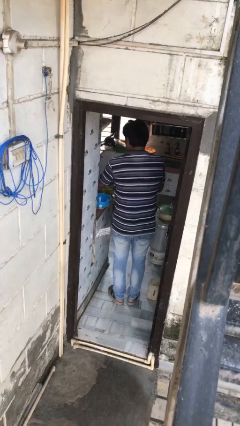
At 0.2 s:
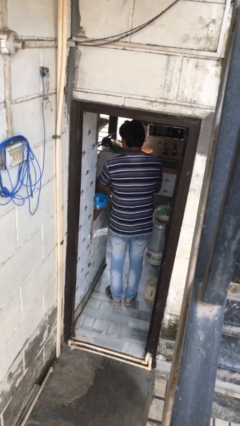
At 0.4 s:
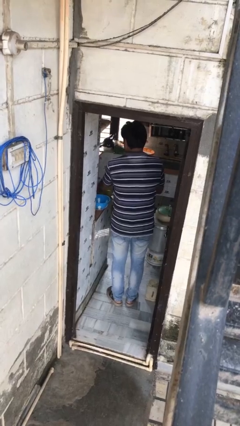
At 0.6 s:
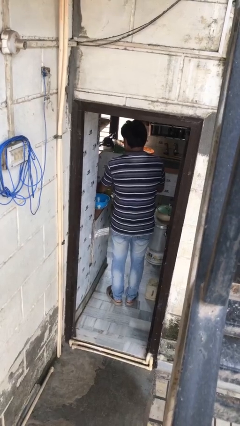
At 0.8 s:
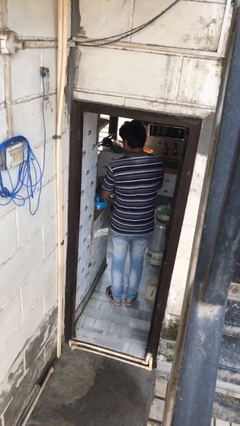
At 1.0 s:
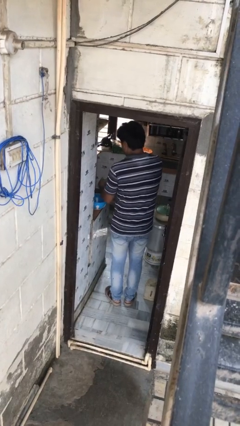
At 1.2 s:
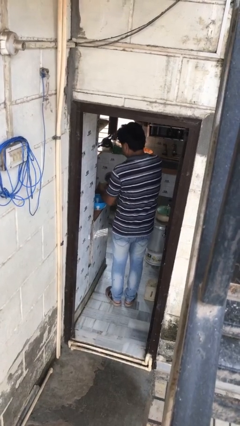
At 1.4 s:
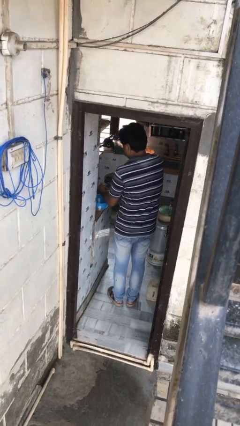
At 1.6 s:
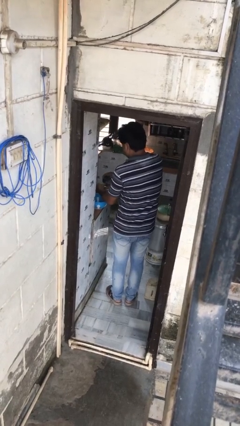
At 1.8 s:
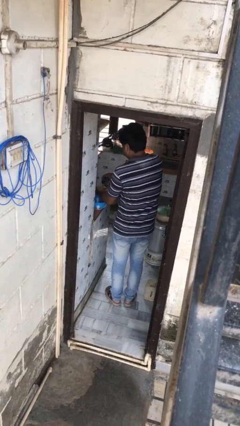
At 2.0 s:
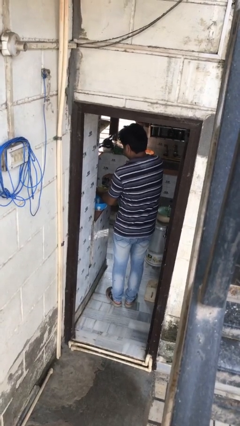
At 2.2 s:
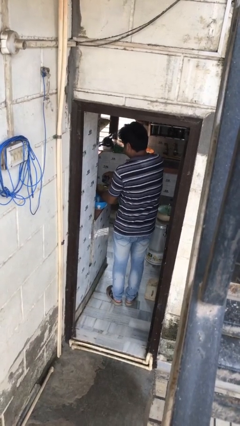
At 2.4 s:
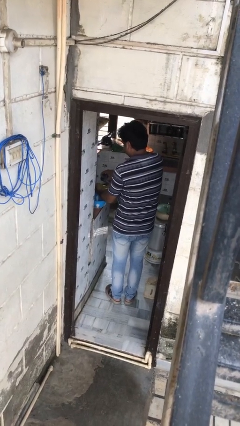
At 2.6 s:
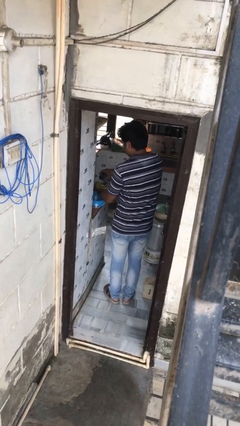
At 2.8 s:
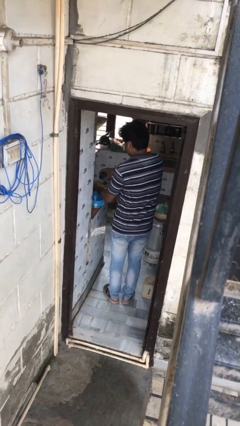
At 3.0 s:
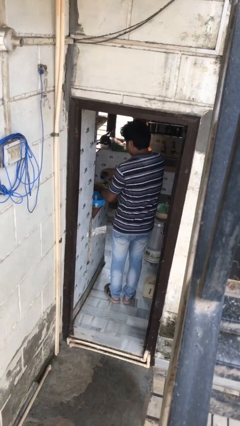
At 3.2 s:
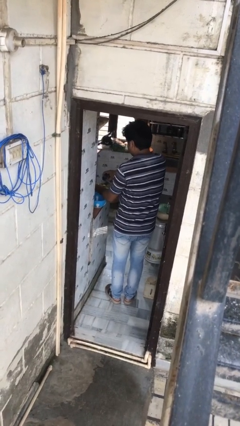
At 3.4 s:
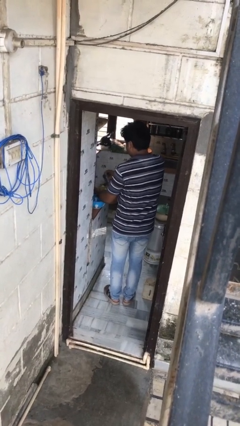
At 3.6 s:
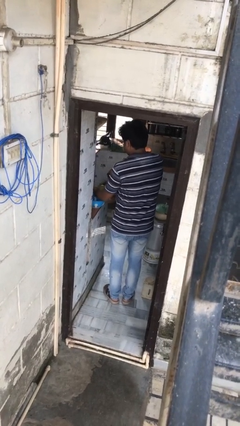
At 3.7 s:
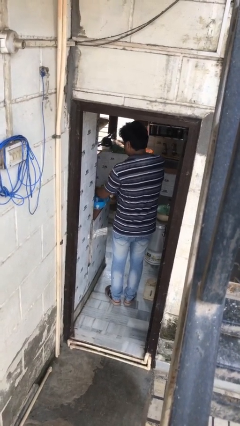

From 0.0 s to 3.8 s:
person washes dish

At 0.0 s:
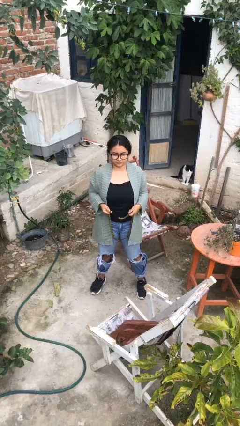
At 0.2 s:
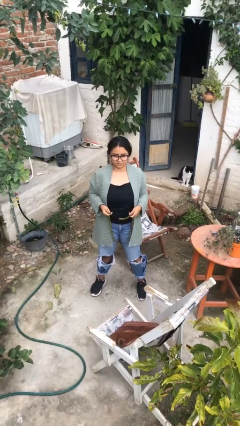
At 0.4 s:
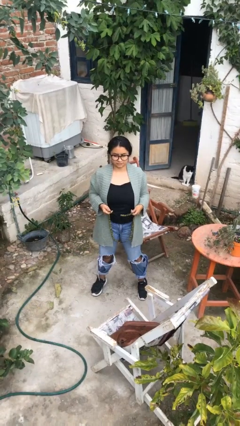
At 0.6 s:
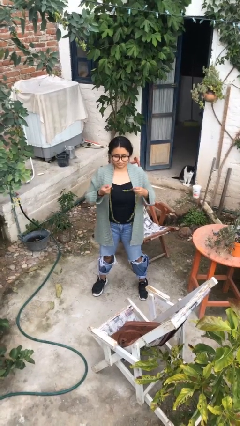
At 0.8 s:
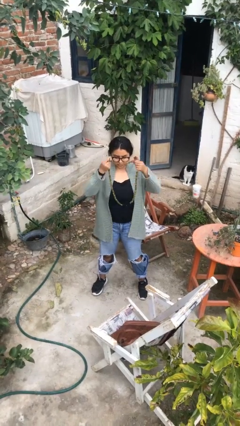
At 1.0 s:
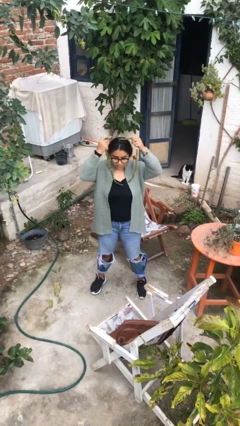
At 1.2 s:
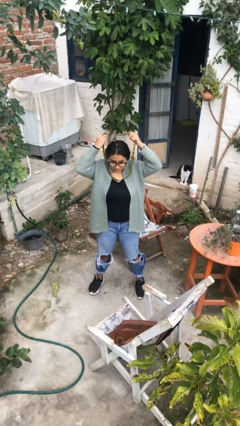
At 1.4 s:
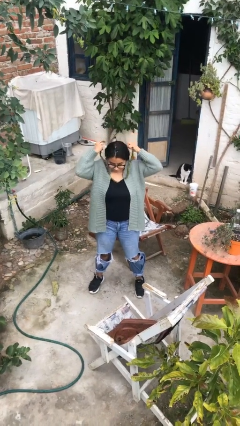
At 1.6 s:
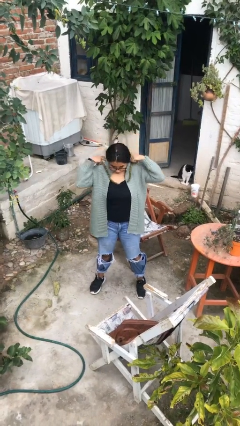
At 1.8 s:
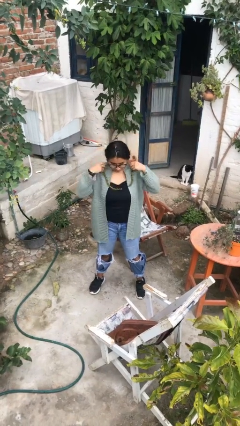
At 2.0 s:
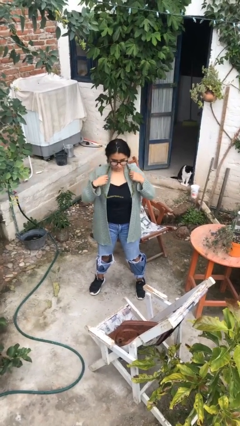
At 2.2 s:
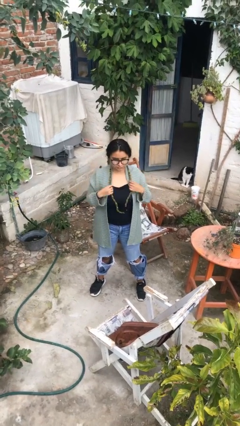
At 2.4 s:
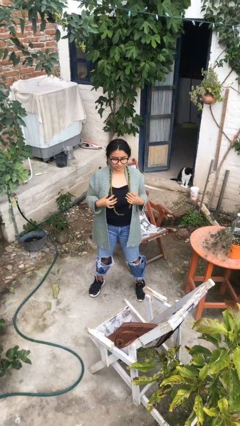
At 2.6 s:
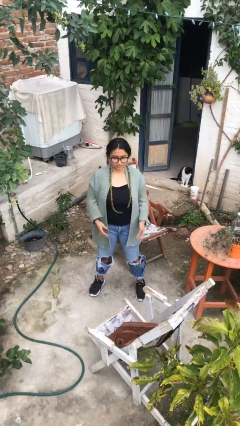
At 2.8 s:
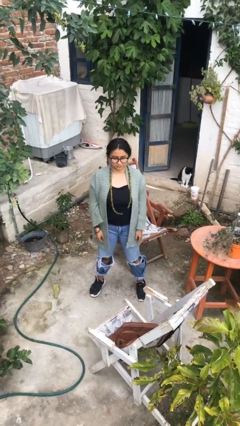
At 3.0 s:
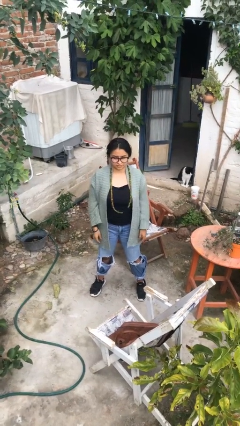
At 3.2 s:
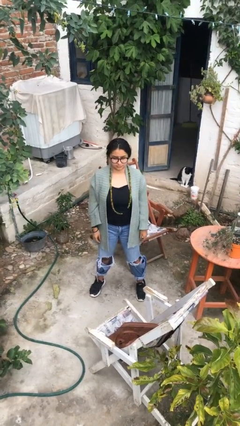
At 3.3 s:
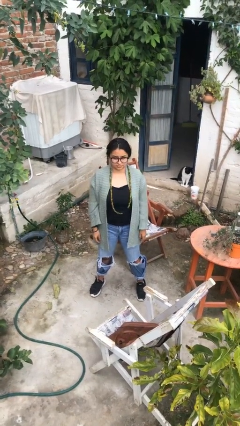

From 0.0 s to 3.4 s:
person puts on necklace

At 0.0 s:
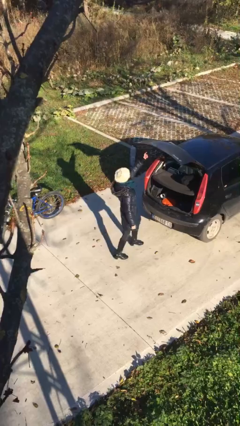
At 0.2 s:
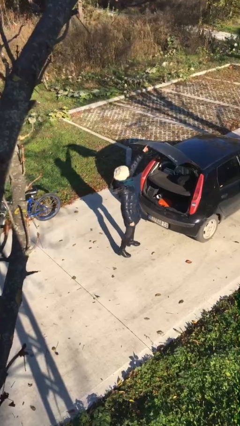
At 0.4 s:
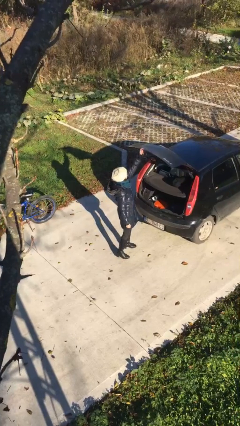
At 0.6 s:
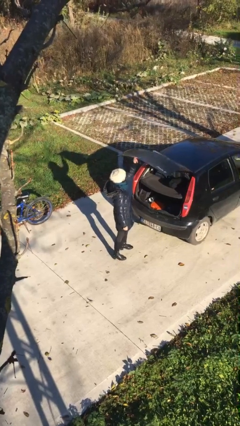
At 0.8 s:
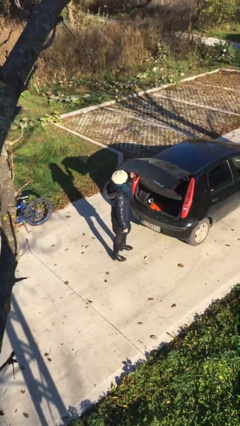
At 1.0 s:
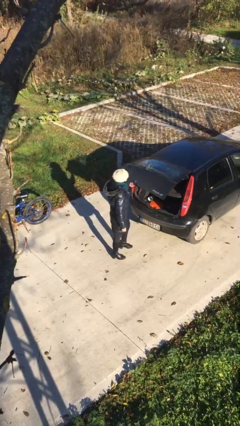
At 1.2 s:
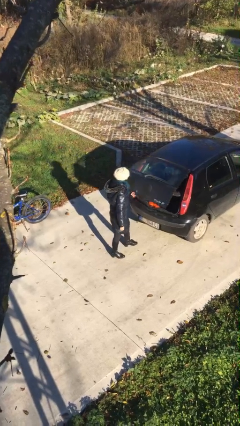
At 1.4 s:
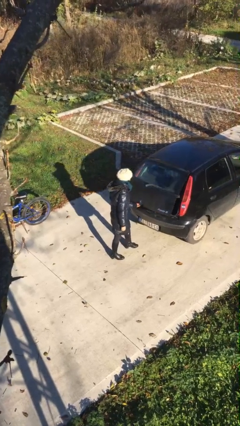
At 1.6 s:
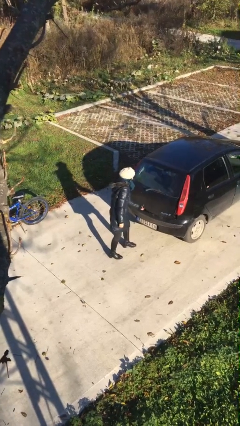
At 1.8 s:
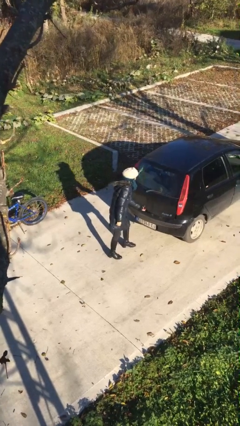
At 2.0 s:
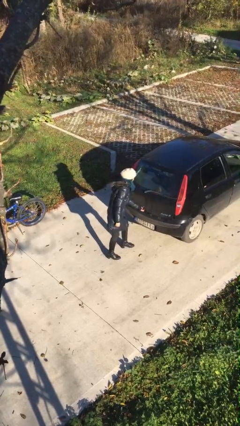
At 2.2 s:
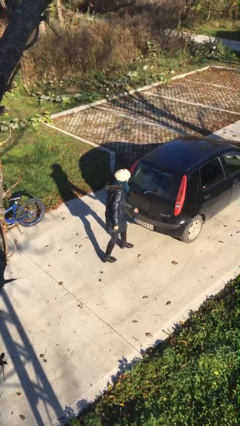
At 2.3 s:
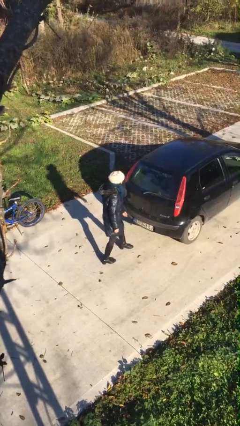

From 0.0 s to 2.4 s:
person closes car trunk

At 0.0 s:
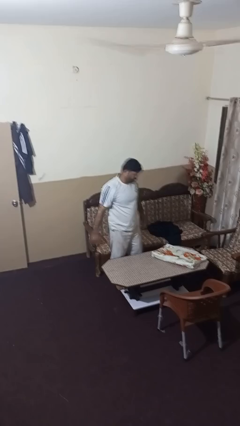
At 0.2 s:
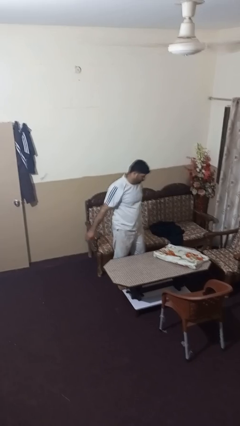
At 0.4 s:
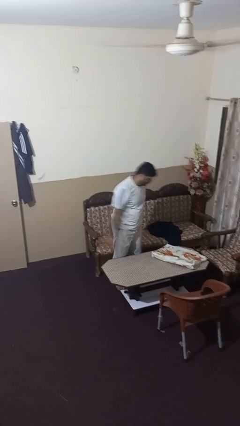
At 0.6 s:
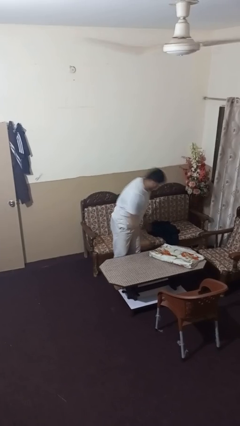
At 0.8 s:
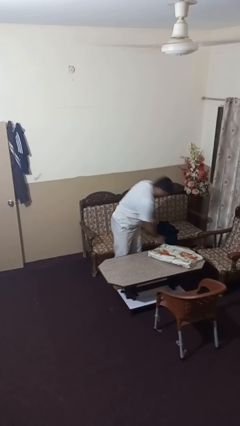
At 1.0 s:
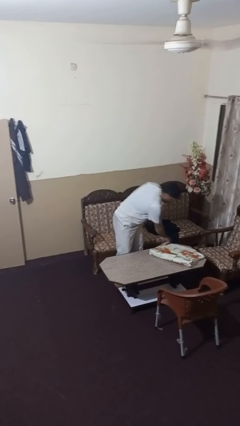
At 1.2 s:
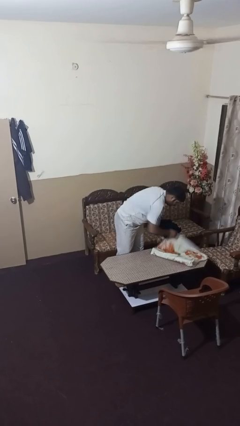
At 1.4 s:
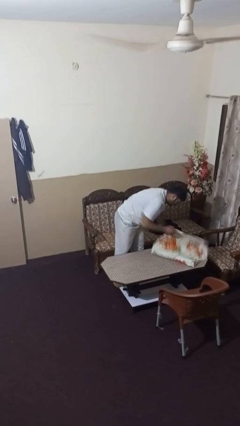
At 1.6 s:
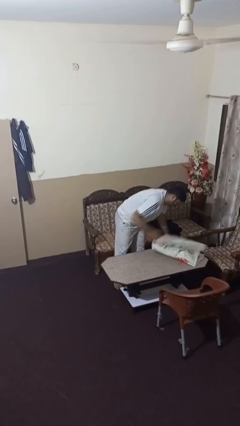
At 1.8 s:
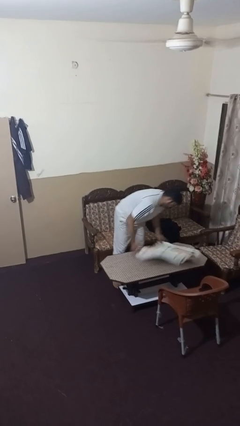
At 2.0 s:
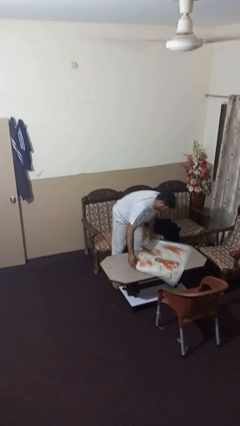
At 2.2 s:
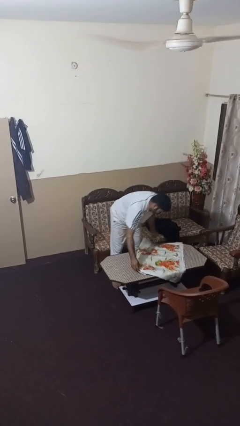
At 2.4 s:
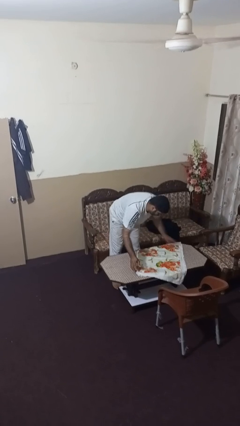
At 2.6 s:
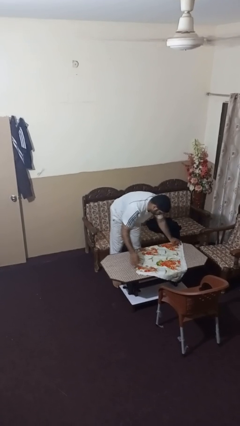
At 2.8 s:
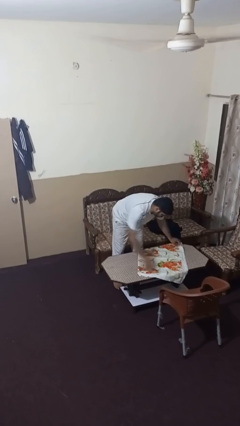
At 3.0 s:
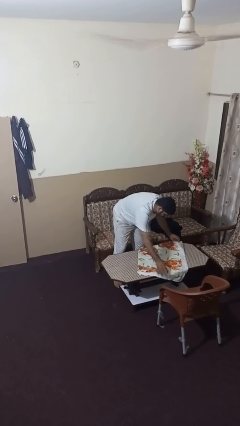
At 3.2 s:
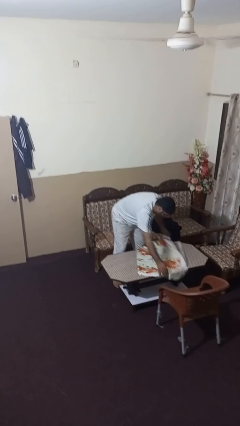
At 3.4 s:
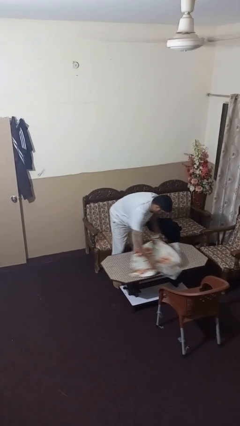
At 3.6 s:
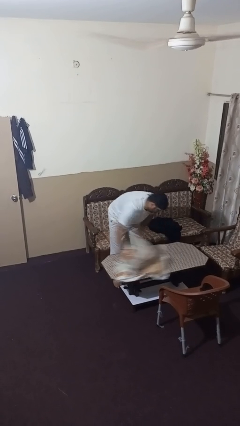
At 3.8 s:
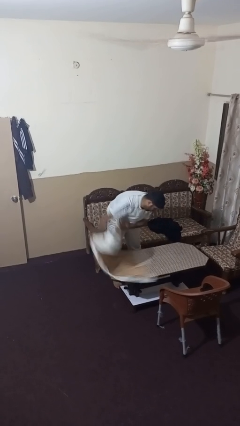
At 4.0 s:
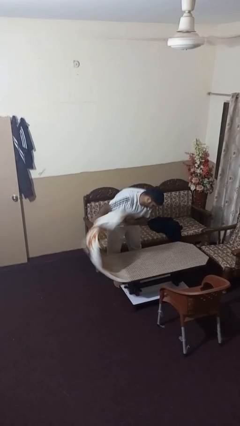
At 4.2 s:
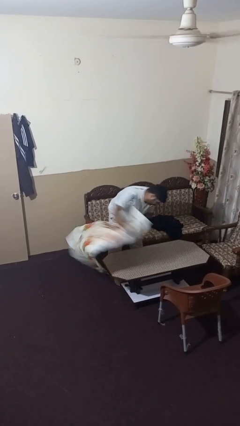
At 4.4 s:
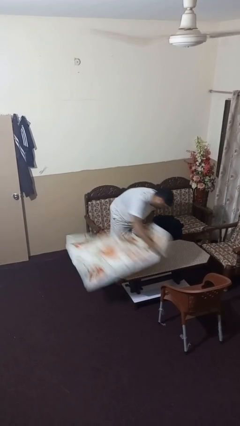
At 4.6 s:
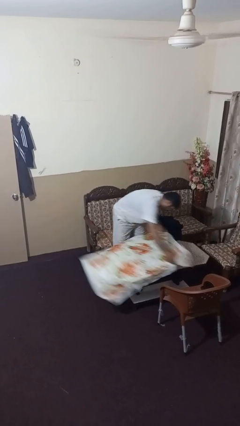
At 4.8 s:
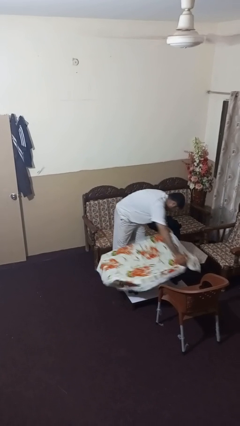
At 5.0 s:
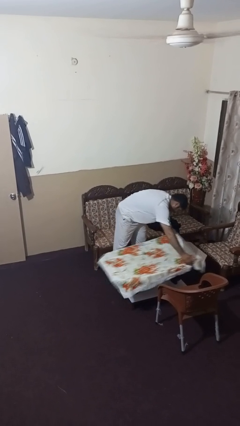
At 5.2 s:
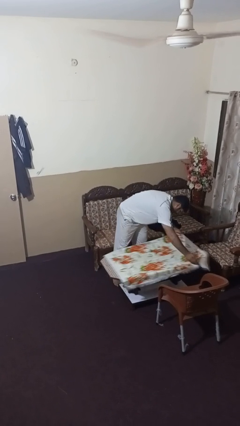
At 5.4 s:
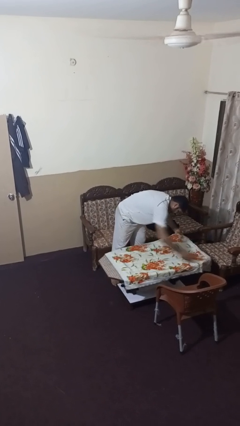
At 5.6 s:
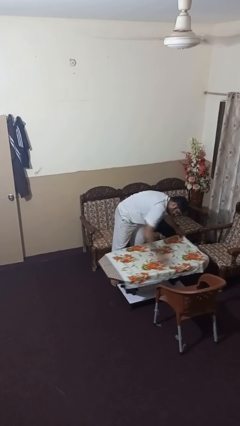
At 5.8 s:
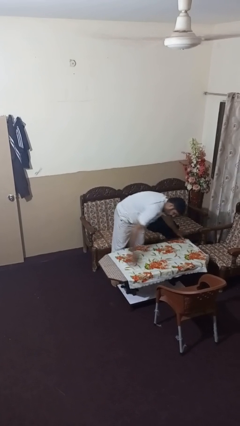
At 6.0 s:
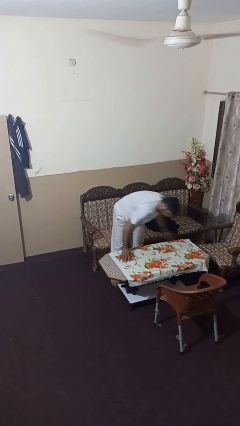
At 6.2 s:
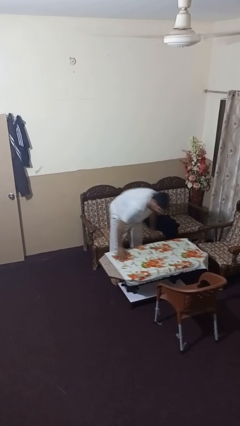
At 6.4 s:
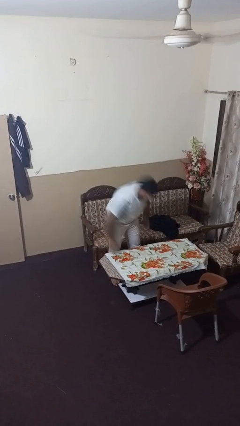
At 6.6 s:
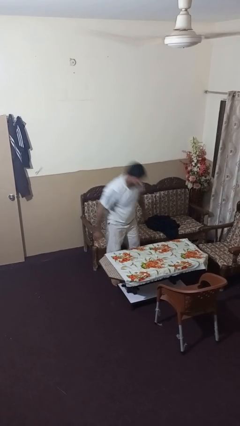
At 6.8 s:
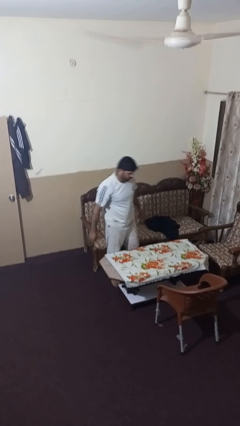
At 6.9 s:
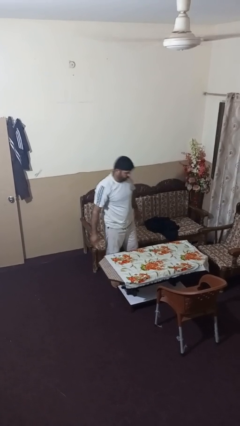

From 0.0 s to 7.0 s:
person spreads tablecloth

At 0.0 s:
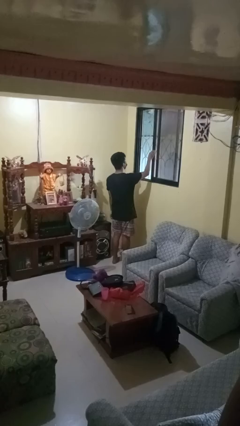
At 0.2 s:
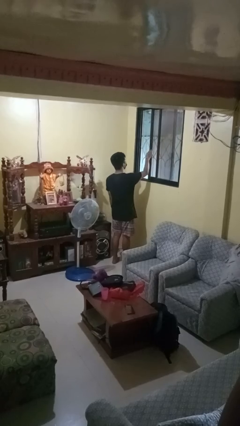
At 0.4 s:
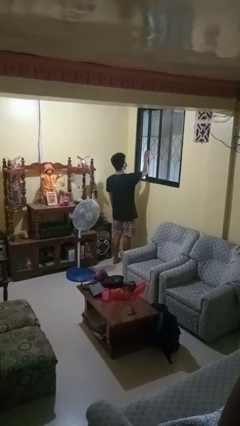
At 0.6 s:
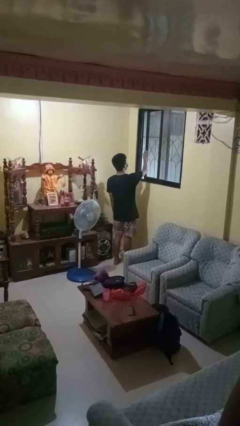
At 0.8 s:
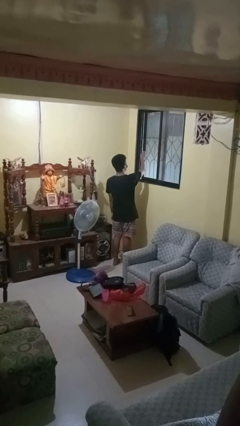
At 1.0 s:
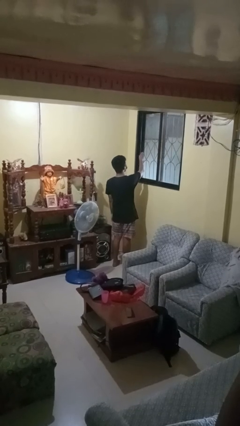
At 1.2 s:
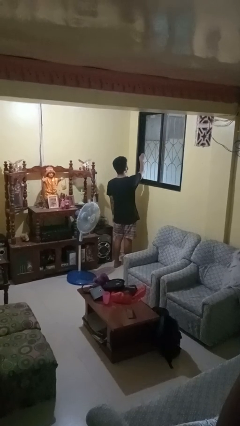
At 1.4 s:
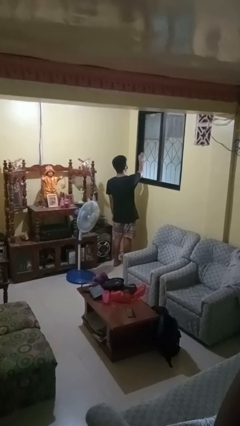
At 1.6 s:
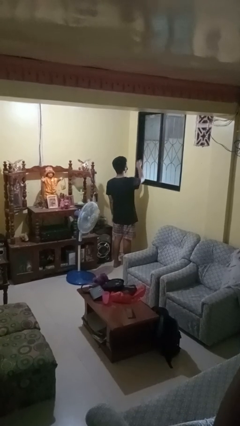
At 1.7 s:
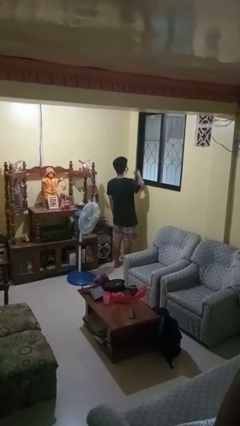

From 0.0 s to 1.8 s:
person closes home window
